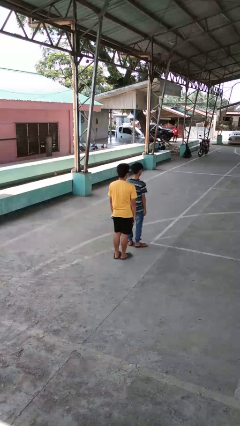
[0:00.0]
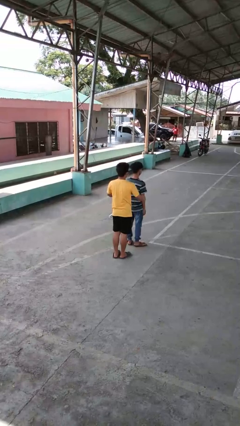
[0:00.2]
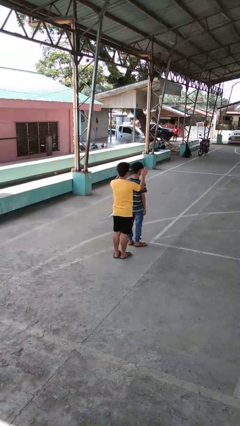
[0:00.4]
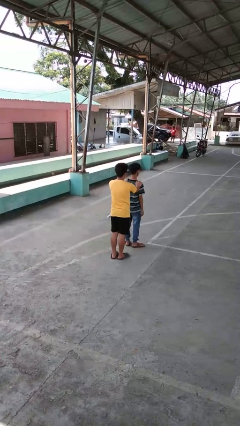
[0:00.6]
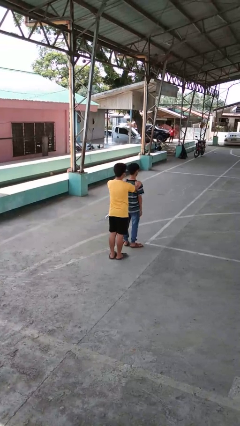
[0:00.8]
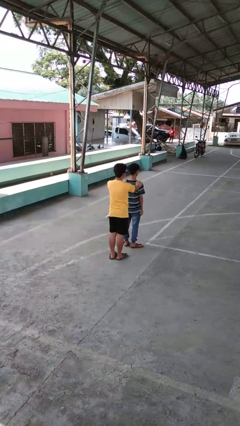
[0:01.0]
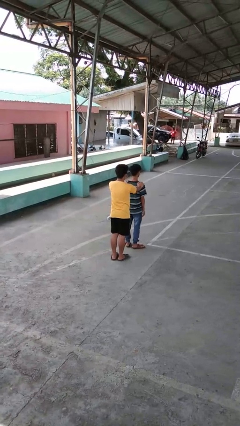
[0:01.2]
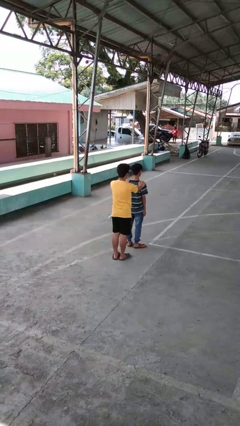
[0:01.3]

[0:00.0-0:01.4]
person grabs person by shoulder

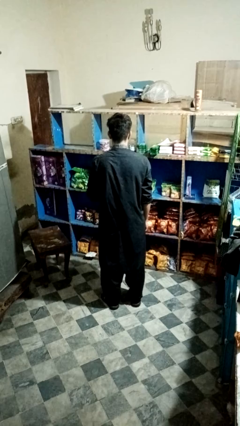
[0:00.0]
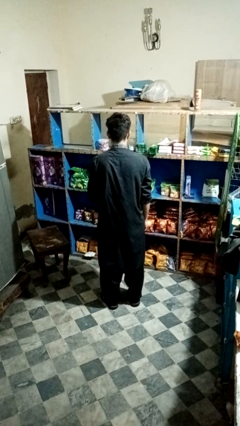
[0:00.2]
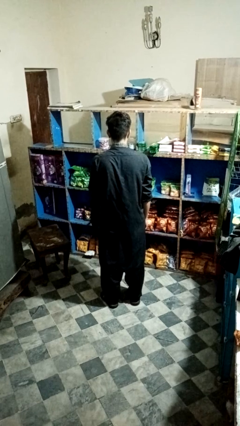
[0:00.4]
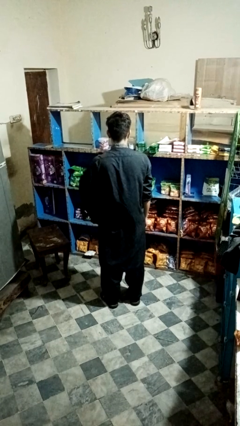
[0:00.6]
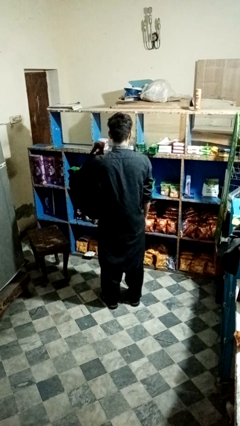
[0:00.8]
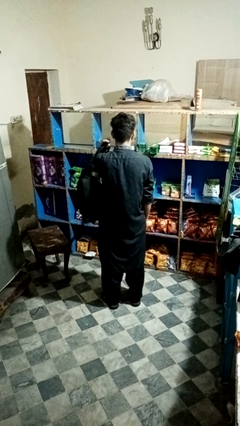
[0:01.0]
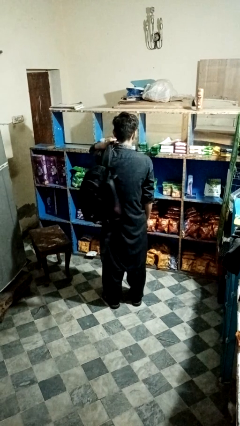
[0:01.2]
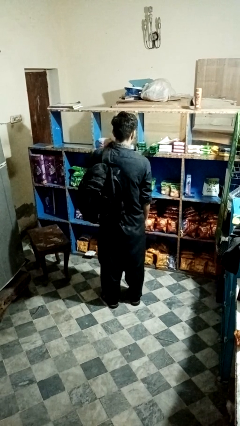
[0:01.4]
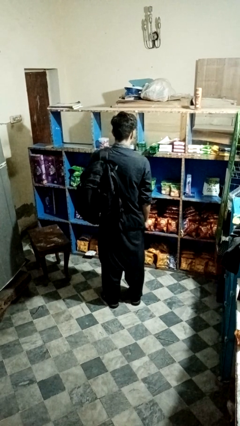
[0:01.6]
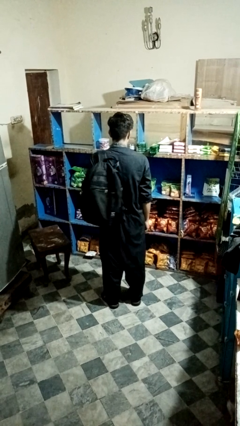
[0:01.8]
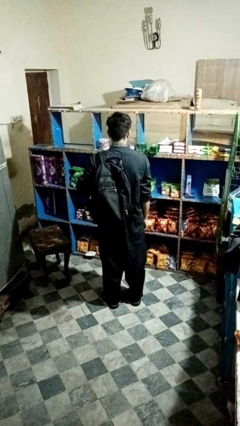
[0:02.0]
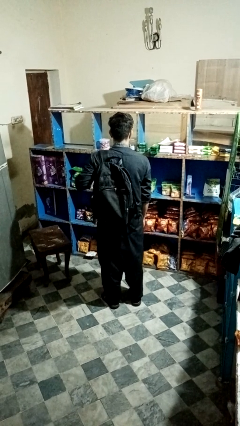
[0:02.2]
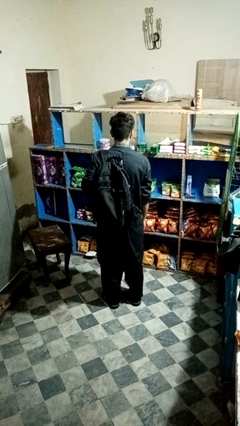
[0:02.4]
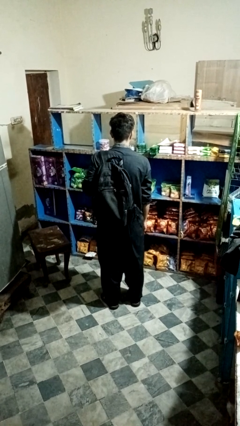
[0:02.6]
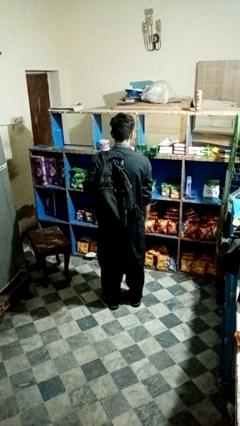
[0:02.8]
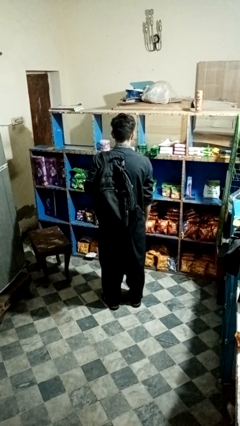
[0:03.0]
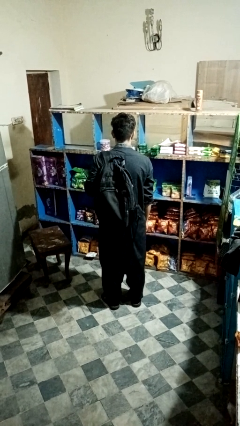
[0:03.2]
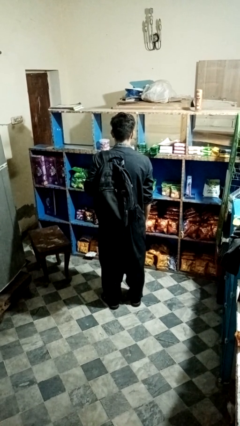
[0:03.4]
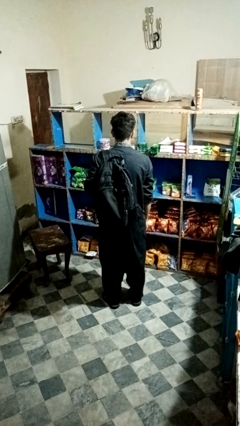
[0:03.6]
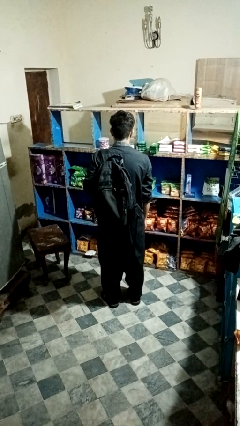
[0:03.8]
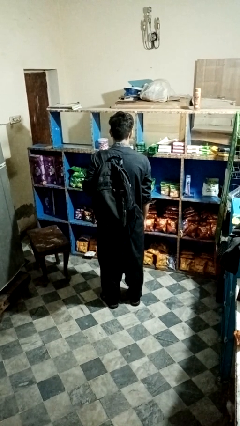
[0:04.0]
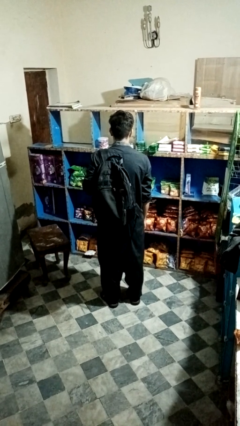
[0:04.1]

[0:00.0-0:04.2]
person puts on backpack

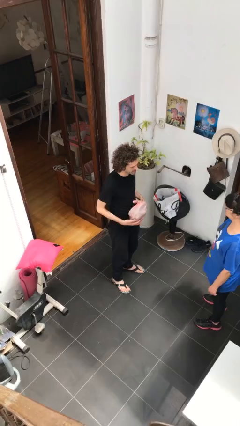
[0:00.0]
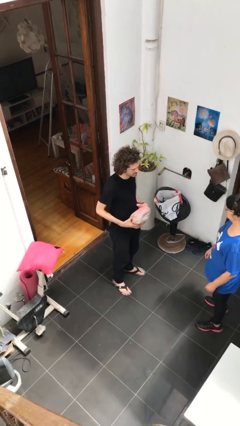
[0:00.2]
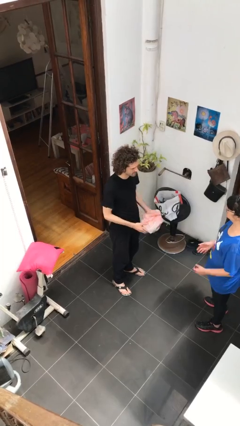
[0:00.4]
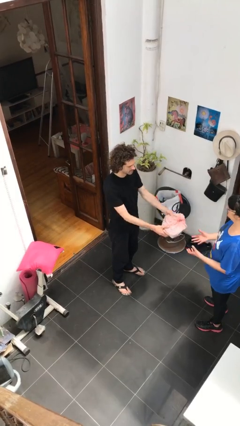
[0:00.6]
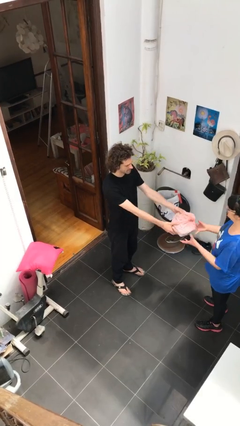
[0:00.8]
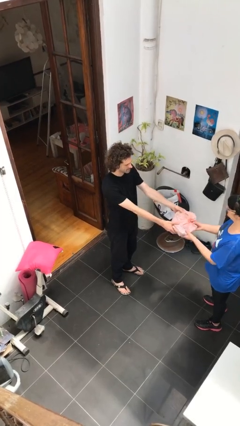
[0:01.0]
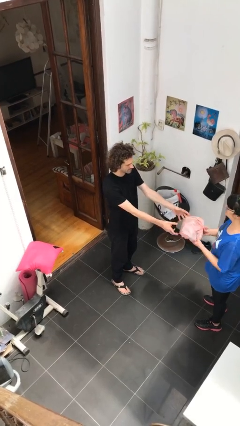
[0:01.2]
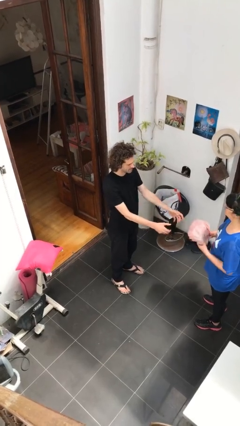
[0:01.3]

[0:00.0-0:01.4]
person transfers object to person

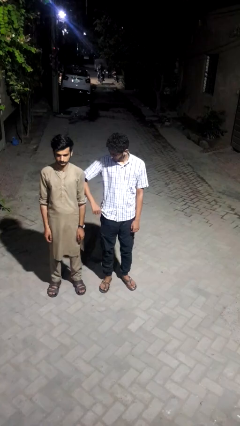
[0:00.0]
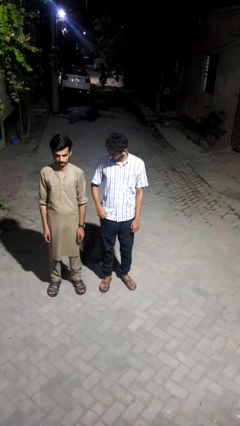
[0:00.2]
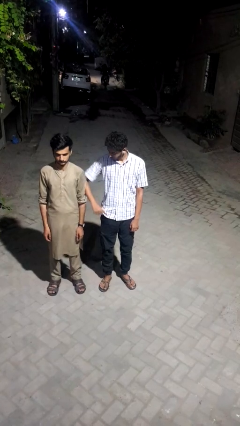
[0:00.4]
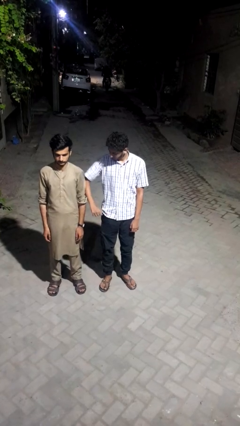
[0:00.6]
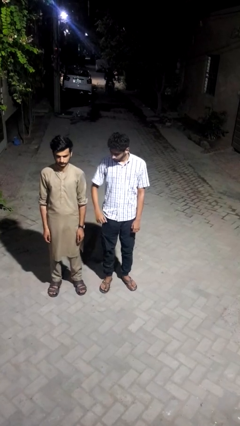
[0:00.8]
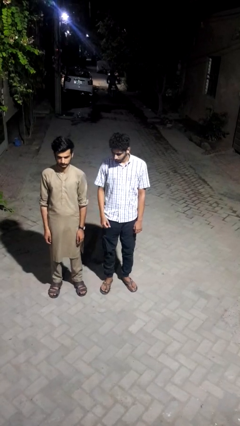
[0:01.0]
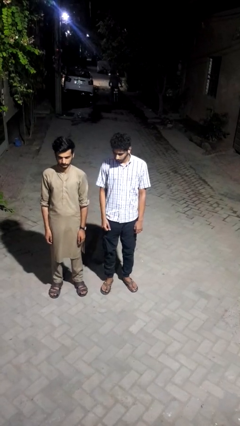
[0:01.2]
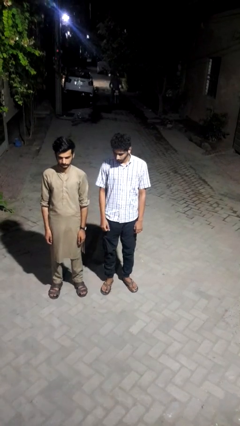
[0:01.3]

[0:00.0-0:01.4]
person nudges person with elbow

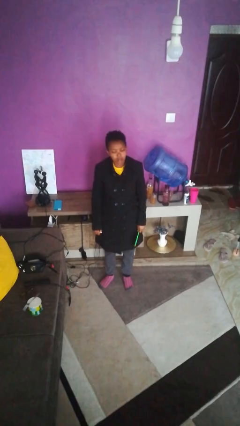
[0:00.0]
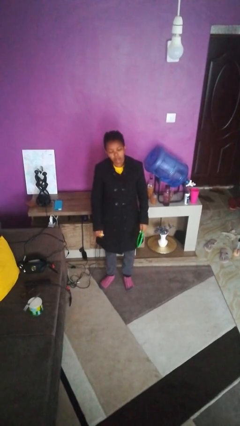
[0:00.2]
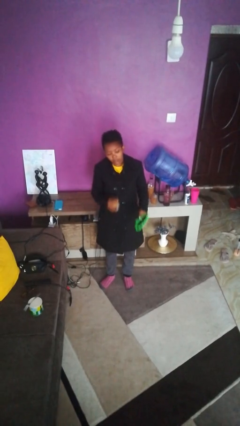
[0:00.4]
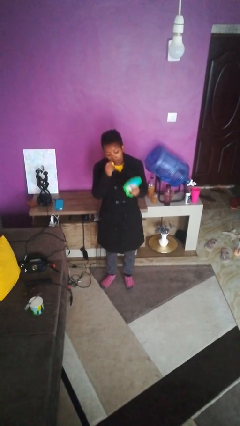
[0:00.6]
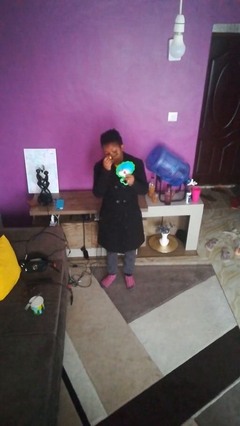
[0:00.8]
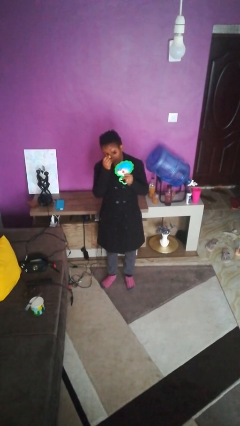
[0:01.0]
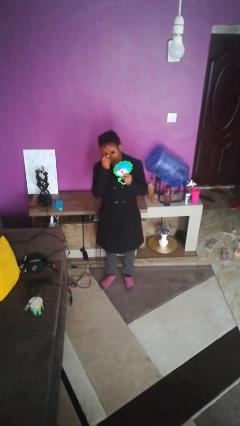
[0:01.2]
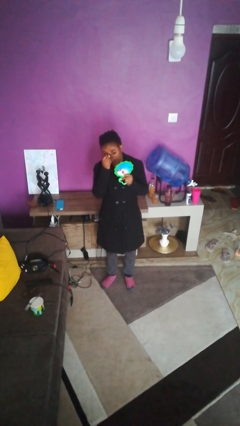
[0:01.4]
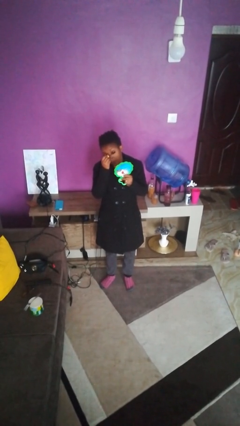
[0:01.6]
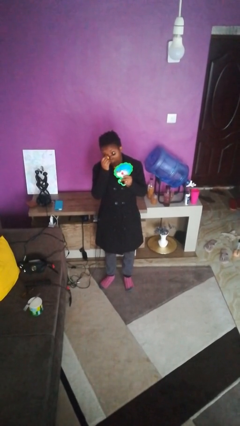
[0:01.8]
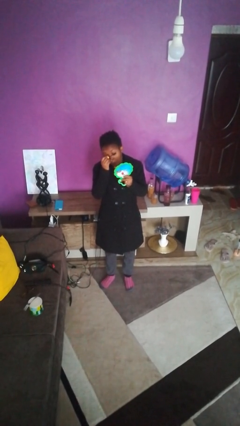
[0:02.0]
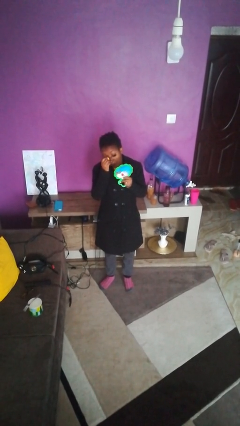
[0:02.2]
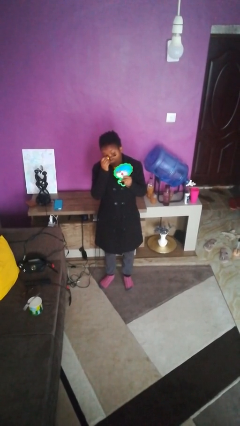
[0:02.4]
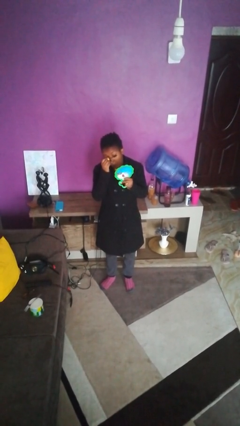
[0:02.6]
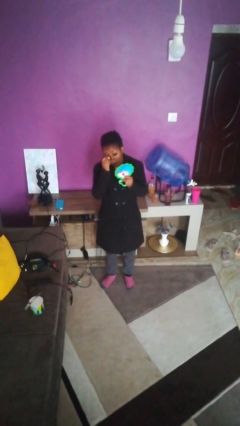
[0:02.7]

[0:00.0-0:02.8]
person applies eye makeup

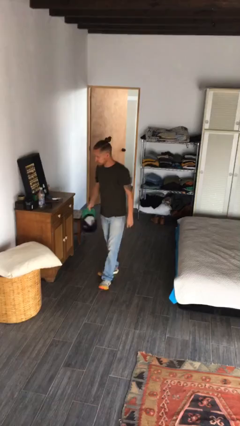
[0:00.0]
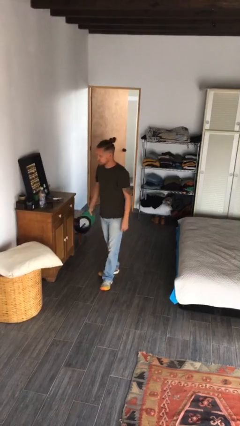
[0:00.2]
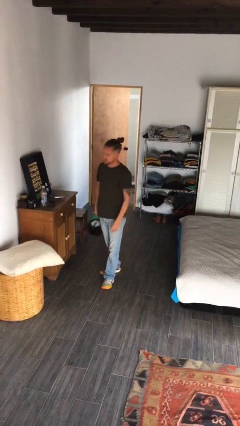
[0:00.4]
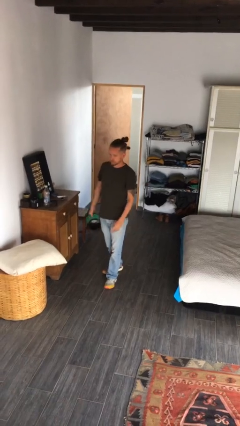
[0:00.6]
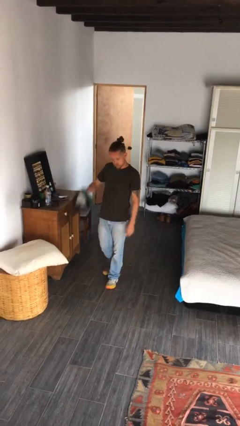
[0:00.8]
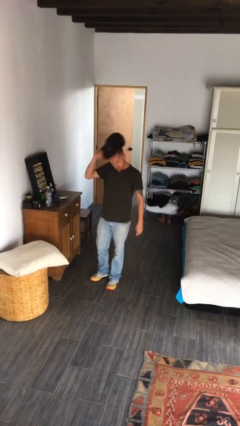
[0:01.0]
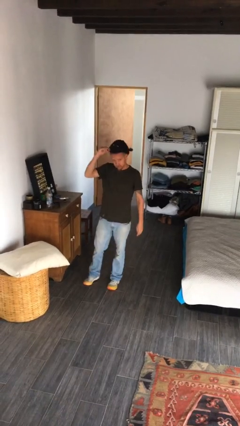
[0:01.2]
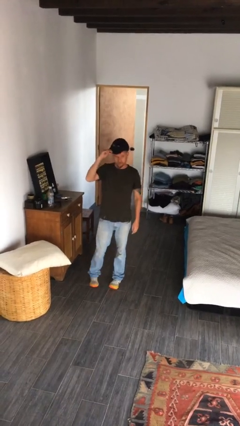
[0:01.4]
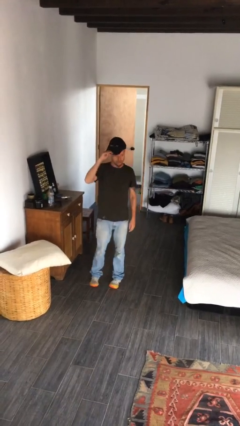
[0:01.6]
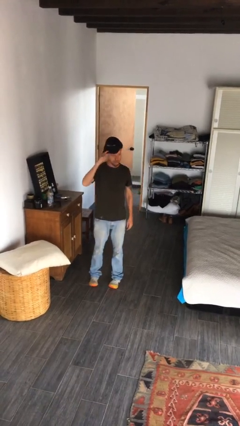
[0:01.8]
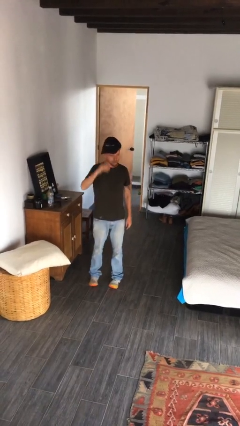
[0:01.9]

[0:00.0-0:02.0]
person puts on hat

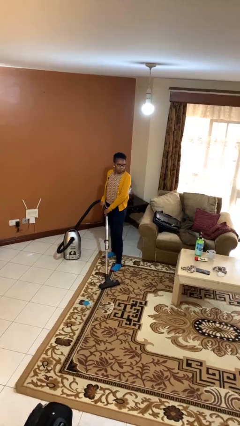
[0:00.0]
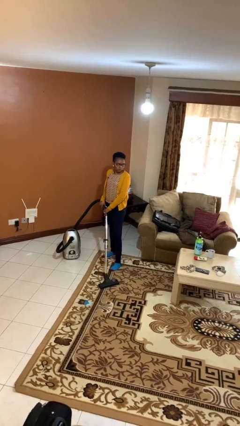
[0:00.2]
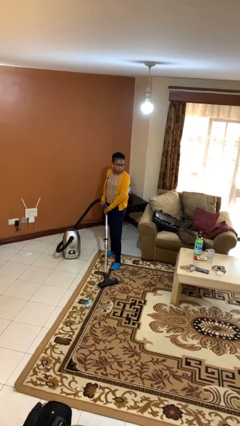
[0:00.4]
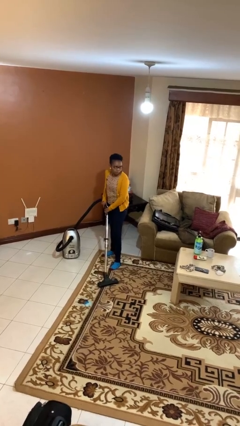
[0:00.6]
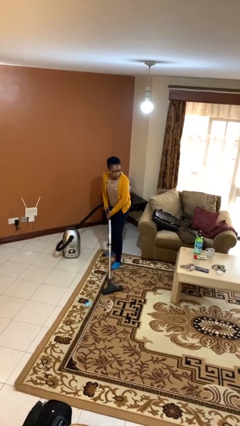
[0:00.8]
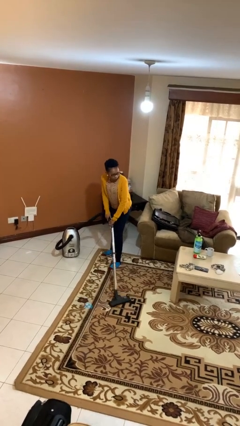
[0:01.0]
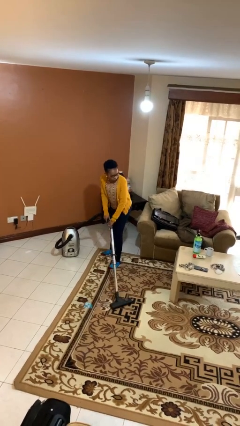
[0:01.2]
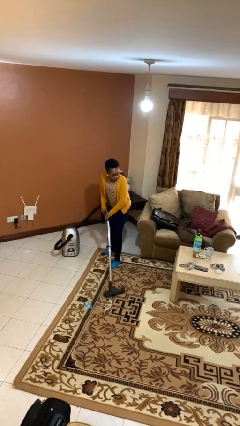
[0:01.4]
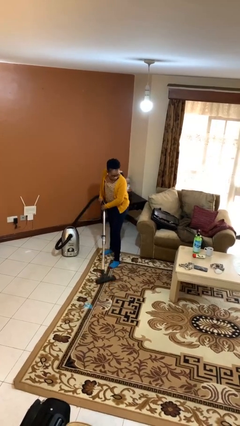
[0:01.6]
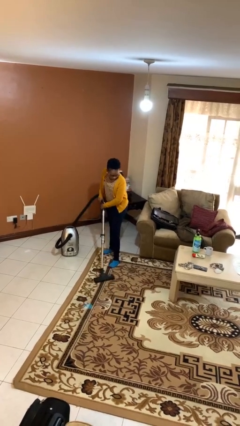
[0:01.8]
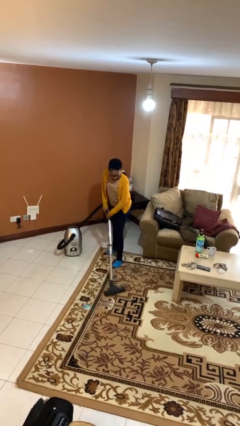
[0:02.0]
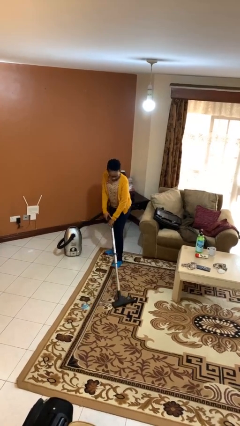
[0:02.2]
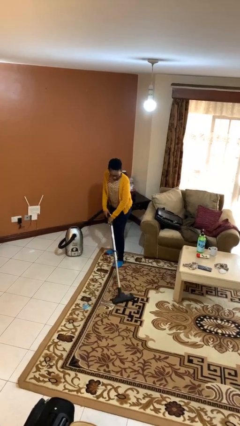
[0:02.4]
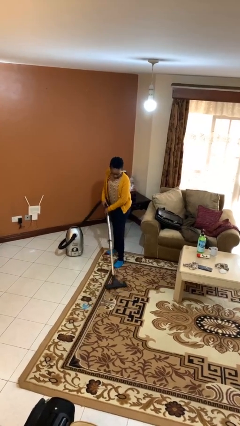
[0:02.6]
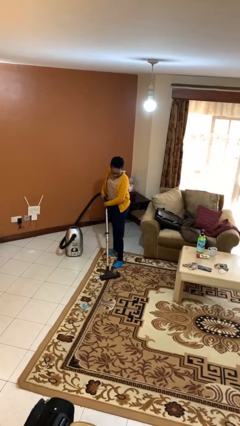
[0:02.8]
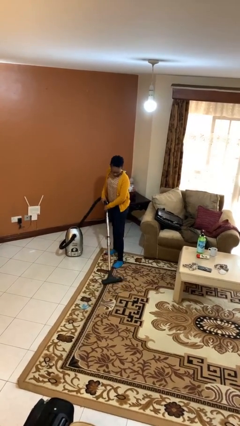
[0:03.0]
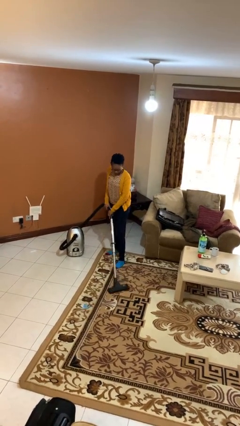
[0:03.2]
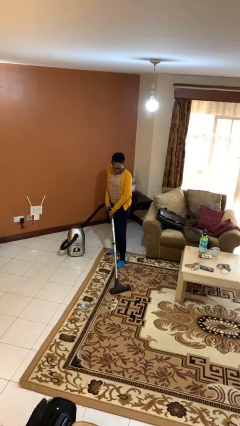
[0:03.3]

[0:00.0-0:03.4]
person vacuums carpet

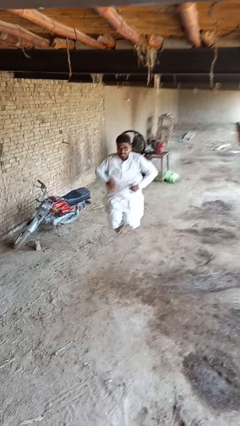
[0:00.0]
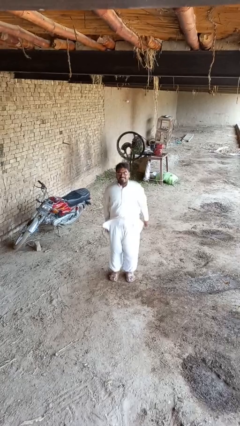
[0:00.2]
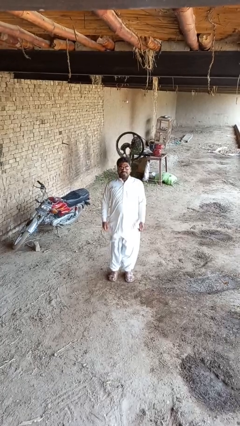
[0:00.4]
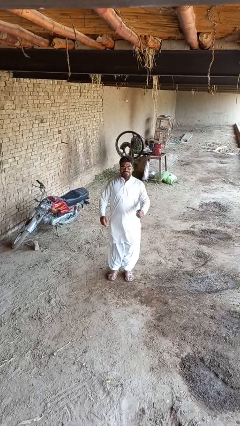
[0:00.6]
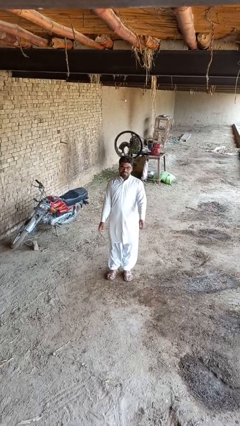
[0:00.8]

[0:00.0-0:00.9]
person jumps
